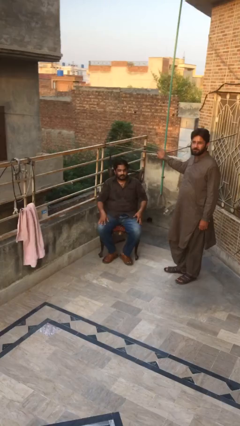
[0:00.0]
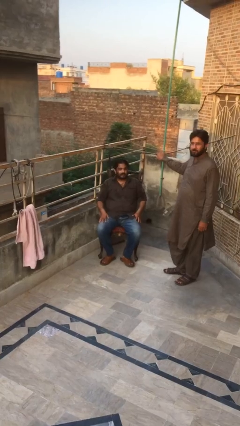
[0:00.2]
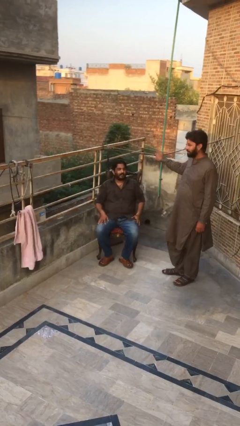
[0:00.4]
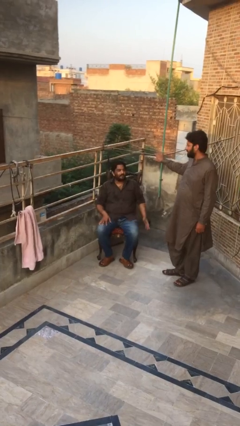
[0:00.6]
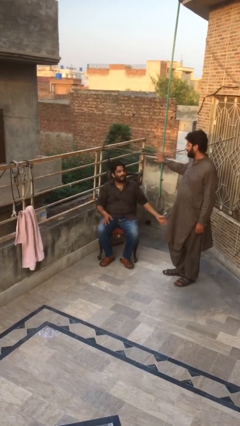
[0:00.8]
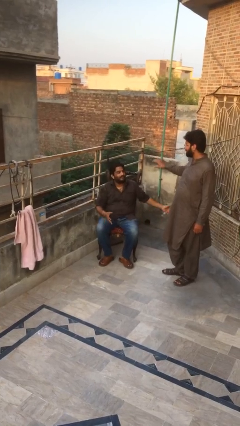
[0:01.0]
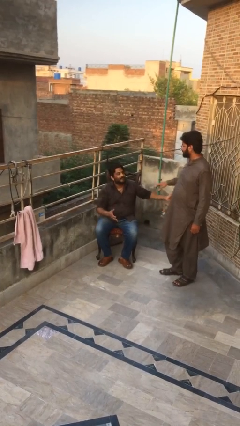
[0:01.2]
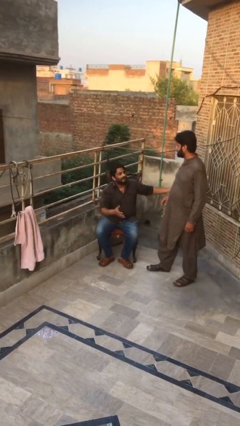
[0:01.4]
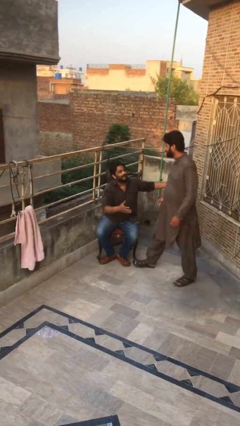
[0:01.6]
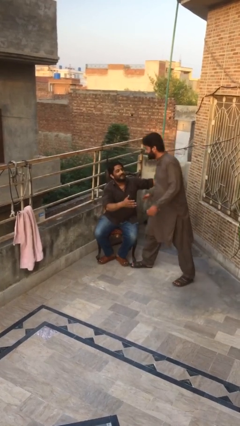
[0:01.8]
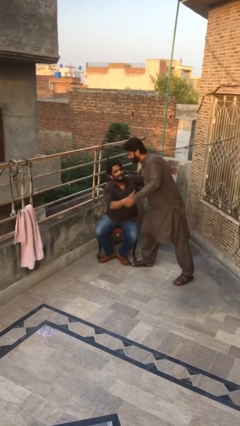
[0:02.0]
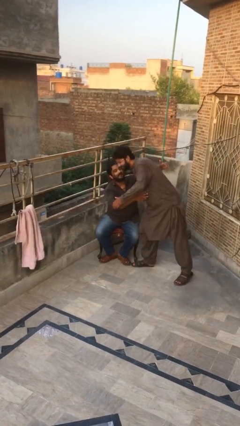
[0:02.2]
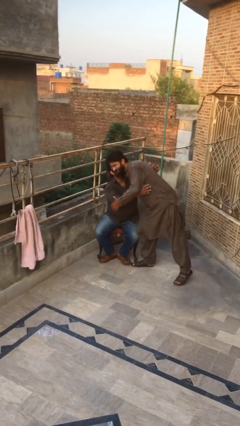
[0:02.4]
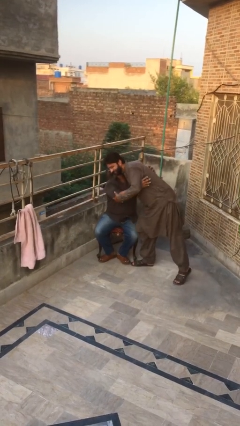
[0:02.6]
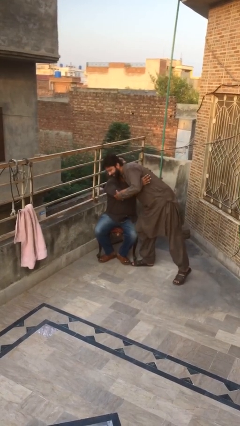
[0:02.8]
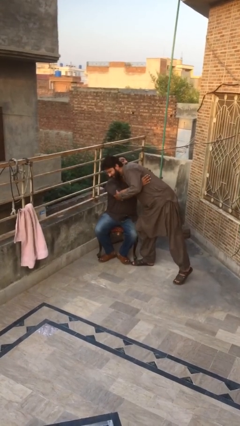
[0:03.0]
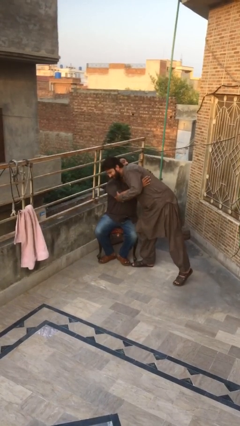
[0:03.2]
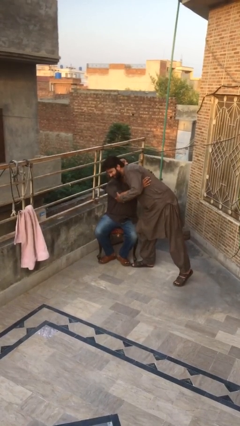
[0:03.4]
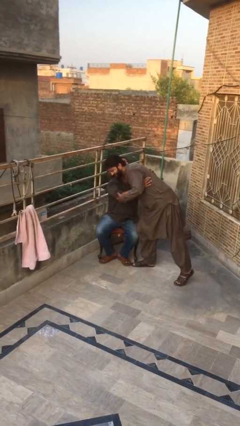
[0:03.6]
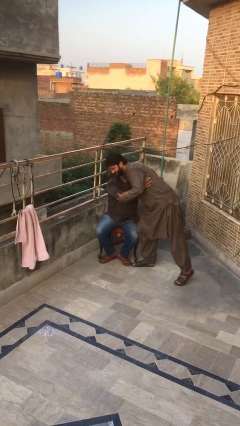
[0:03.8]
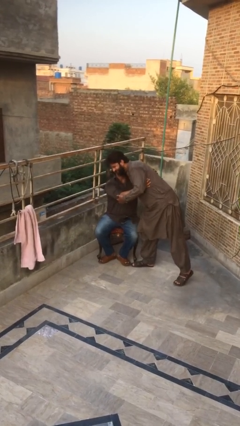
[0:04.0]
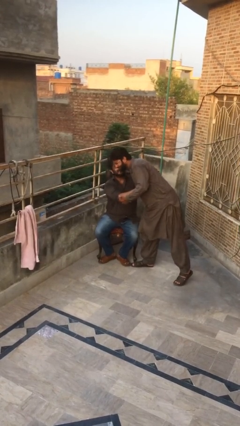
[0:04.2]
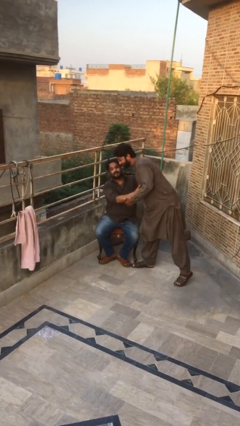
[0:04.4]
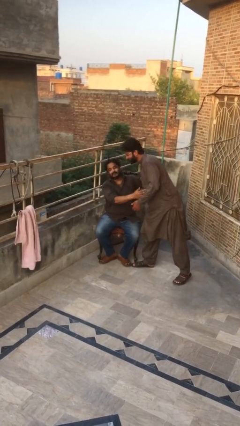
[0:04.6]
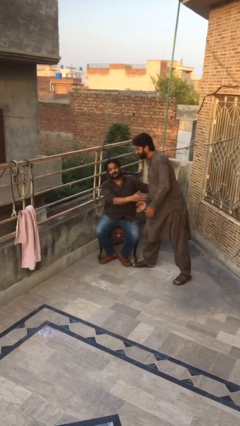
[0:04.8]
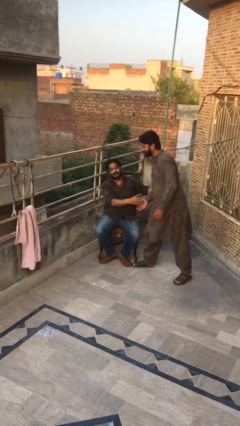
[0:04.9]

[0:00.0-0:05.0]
person embraces person

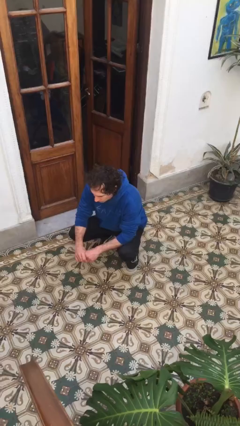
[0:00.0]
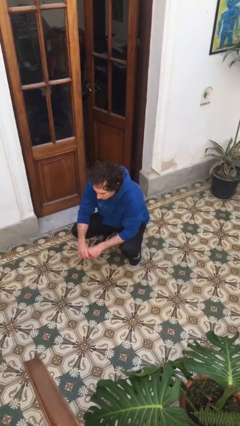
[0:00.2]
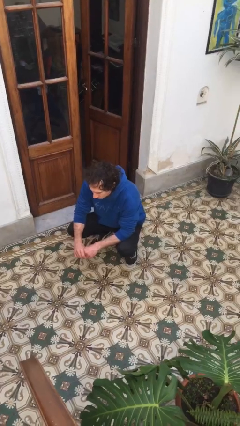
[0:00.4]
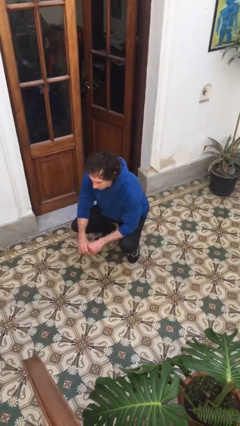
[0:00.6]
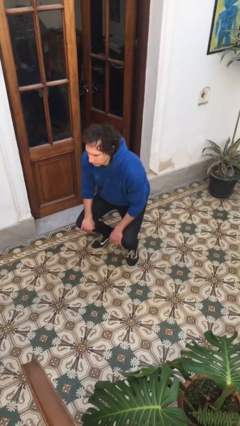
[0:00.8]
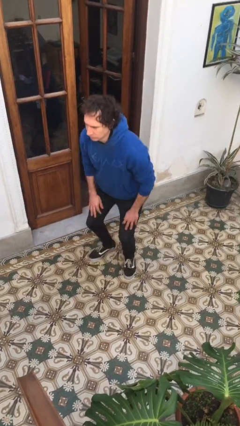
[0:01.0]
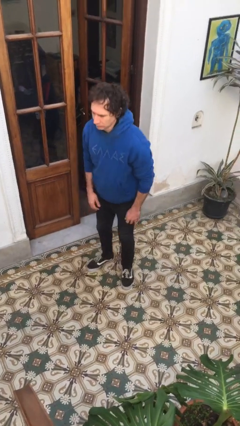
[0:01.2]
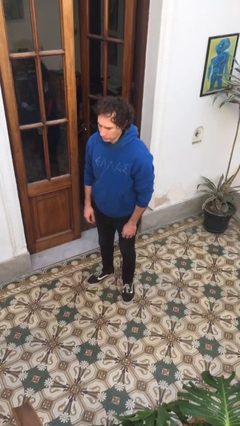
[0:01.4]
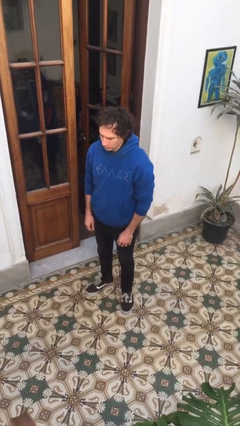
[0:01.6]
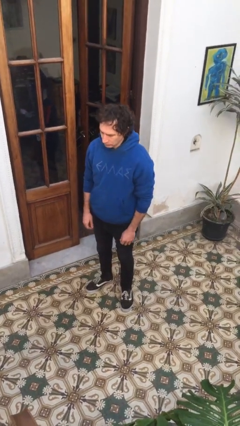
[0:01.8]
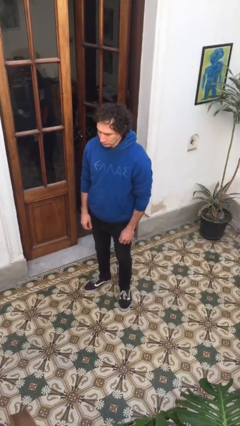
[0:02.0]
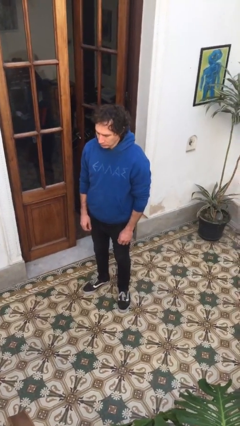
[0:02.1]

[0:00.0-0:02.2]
person stands up

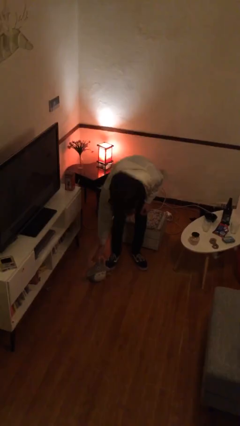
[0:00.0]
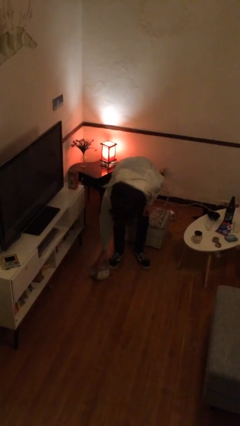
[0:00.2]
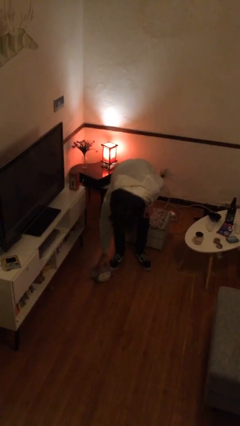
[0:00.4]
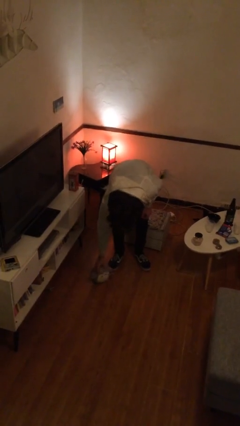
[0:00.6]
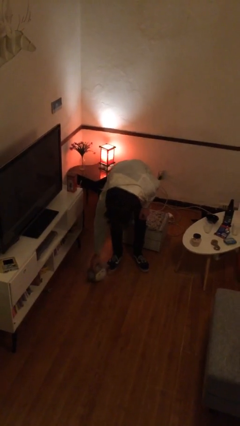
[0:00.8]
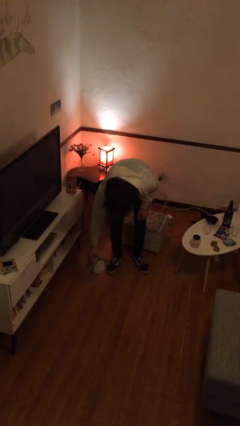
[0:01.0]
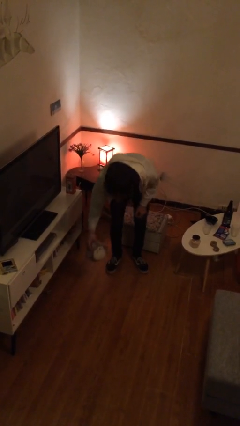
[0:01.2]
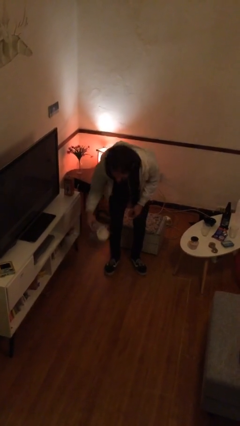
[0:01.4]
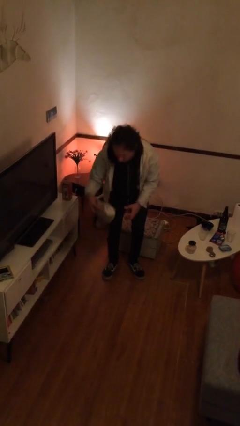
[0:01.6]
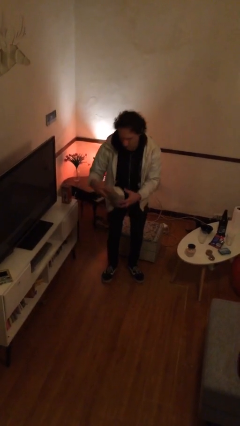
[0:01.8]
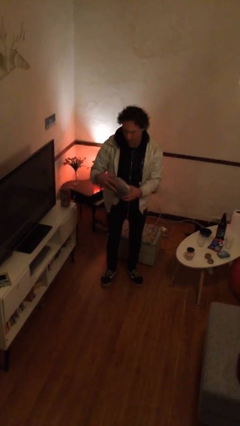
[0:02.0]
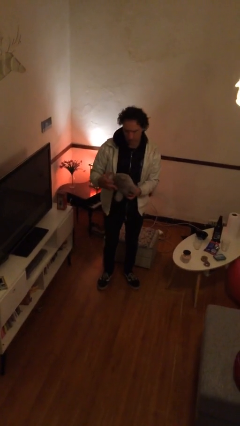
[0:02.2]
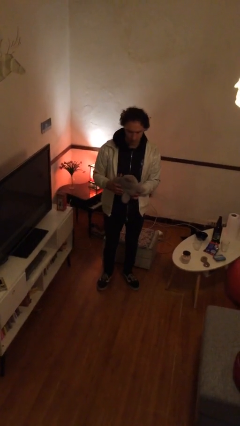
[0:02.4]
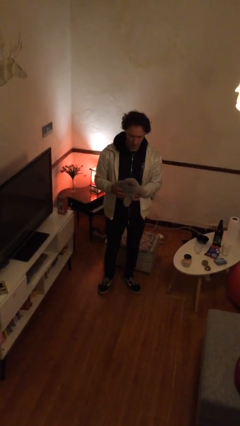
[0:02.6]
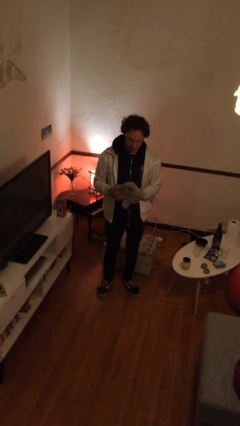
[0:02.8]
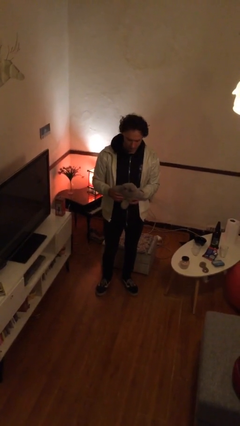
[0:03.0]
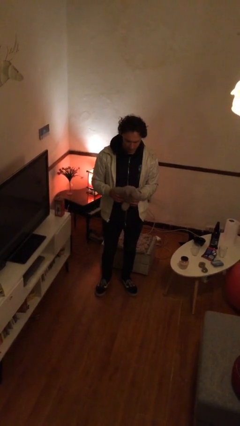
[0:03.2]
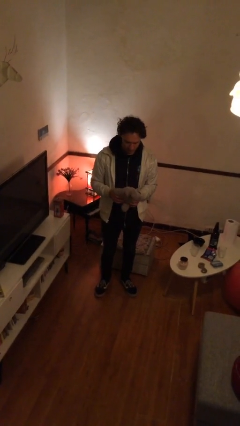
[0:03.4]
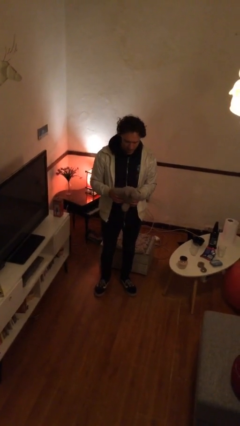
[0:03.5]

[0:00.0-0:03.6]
person picks up object from floor

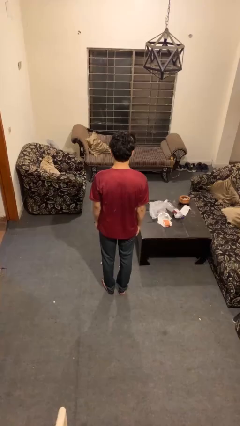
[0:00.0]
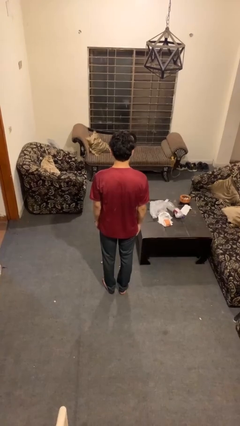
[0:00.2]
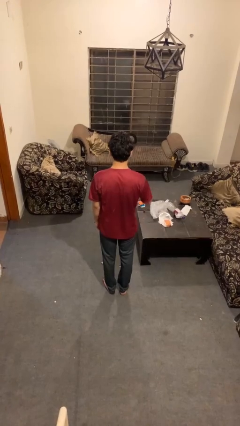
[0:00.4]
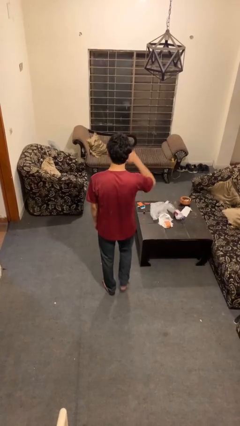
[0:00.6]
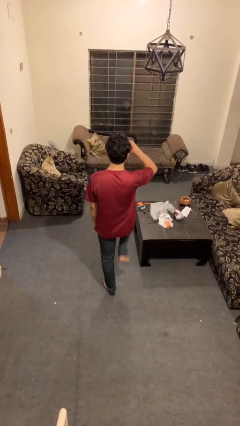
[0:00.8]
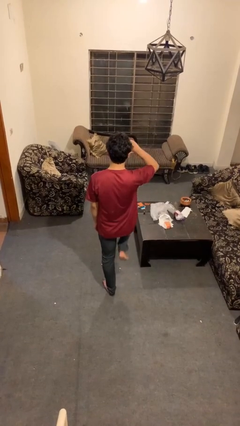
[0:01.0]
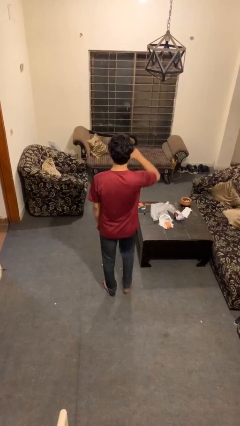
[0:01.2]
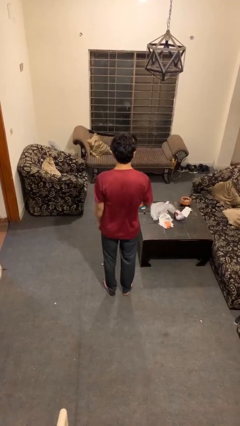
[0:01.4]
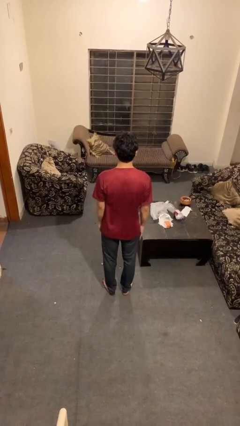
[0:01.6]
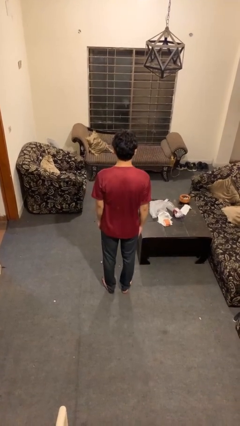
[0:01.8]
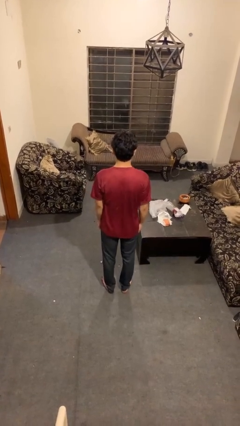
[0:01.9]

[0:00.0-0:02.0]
person salutes

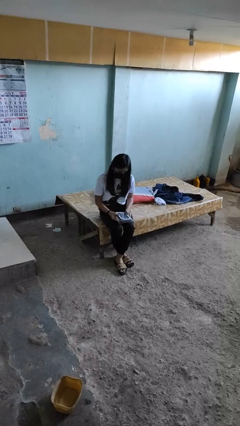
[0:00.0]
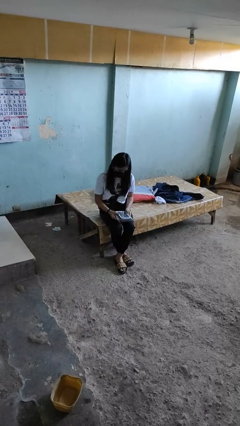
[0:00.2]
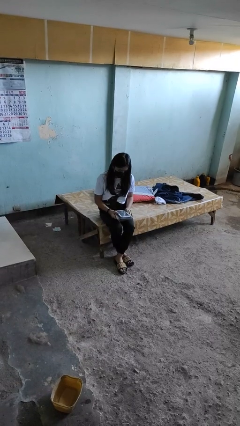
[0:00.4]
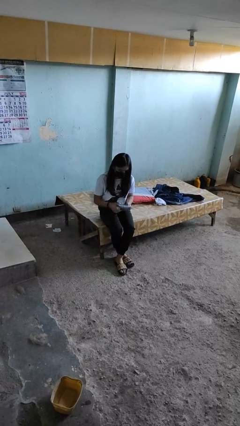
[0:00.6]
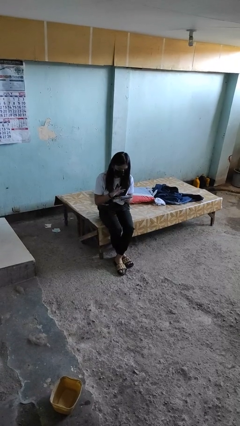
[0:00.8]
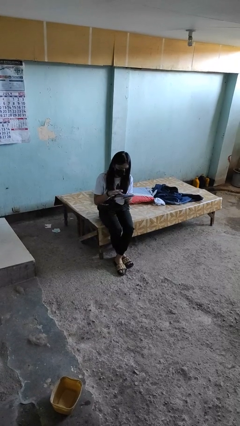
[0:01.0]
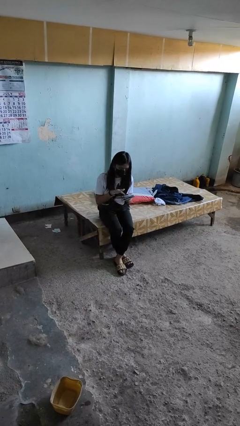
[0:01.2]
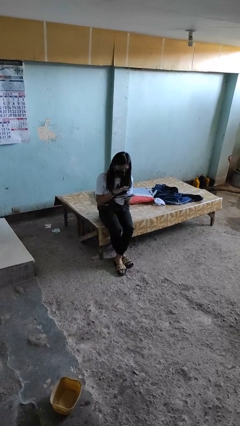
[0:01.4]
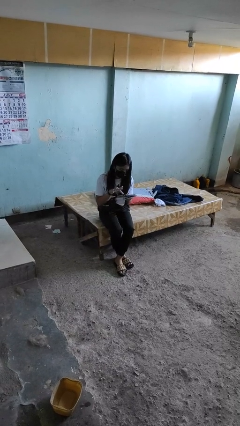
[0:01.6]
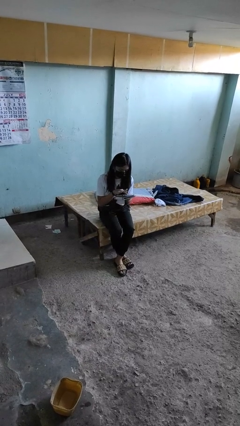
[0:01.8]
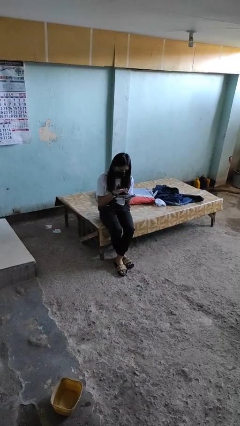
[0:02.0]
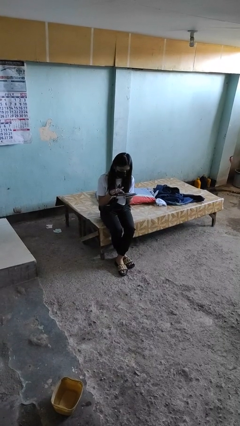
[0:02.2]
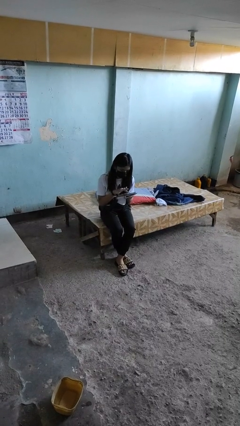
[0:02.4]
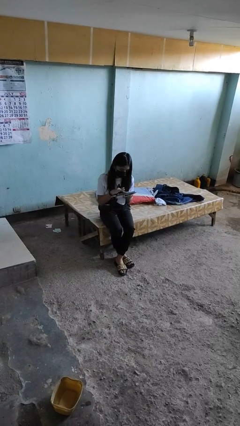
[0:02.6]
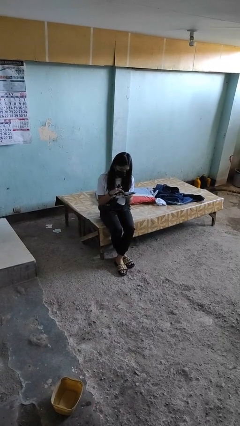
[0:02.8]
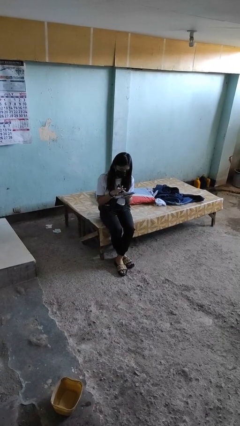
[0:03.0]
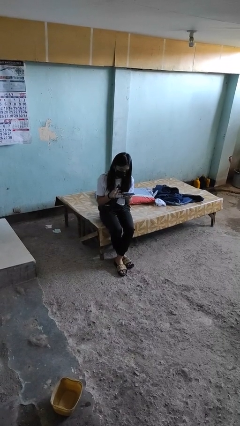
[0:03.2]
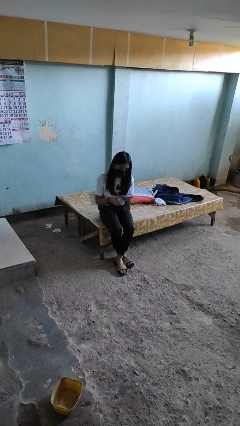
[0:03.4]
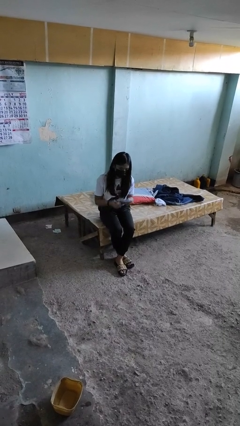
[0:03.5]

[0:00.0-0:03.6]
person interacts with tablet

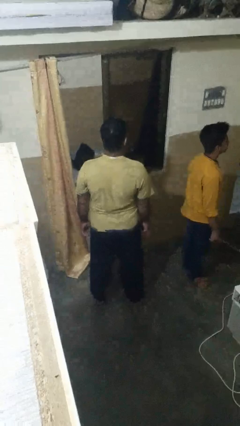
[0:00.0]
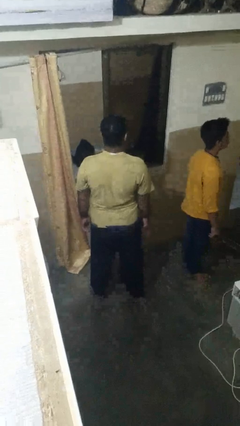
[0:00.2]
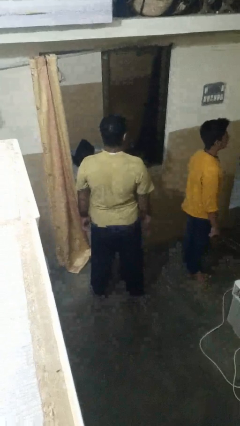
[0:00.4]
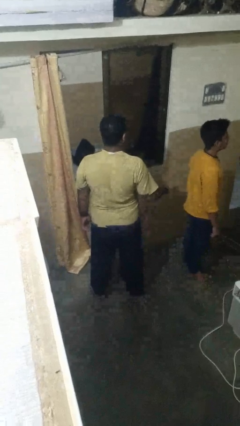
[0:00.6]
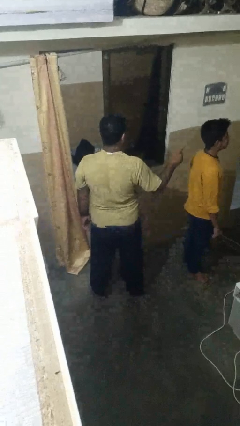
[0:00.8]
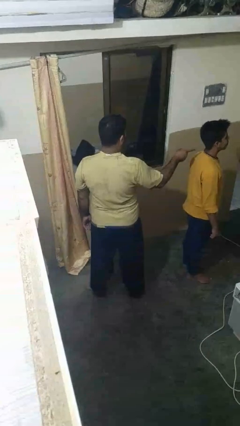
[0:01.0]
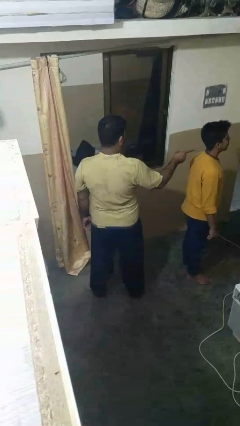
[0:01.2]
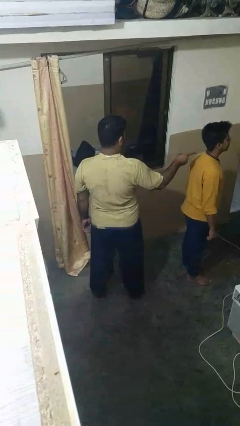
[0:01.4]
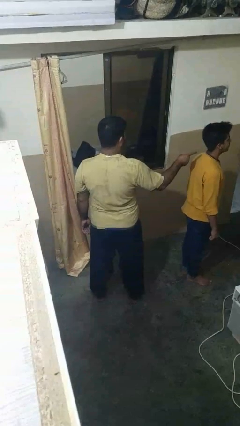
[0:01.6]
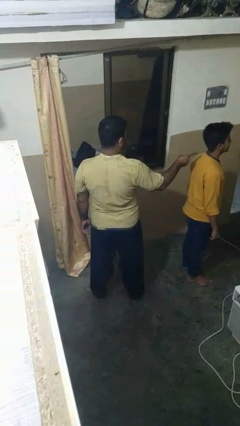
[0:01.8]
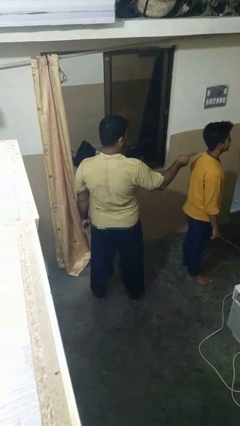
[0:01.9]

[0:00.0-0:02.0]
person points at person
